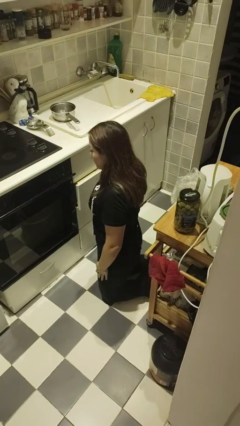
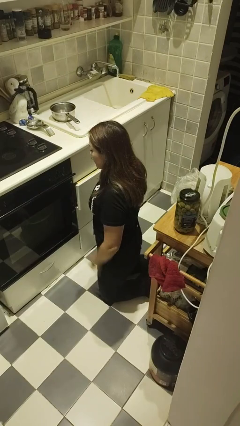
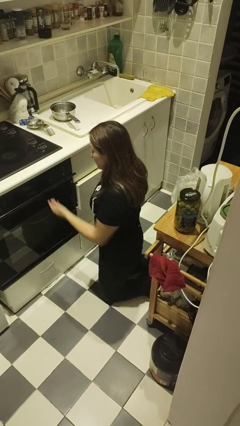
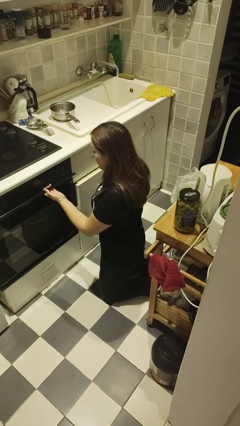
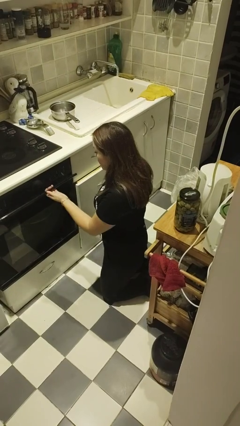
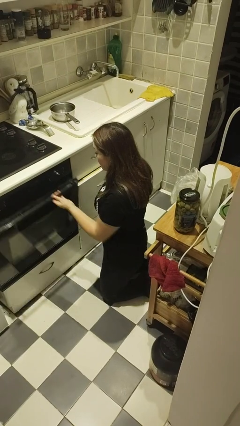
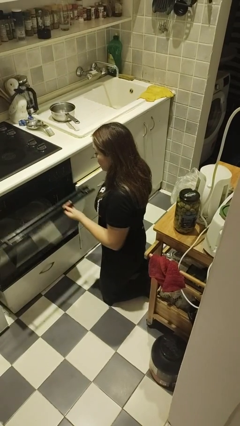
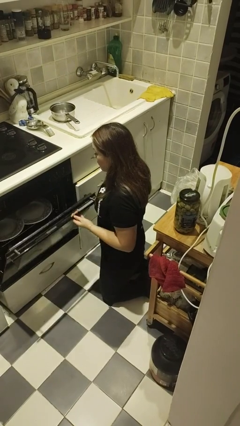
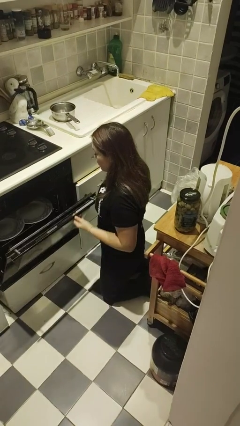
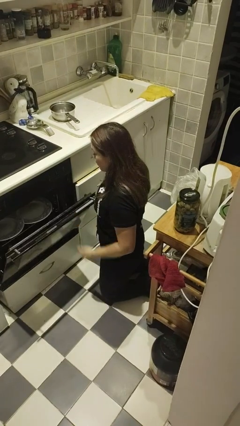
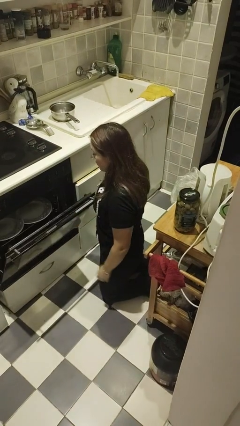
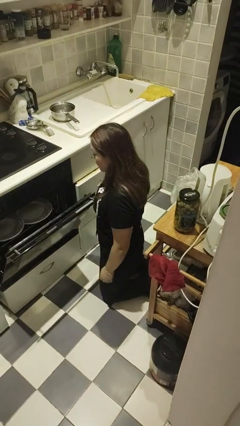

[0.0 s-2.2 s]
person opens oven door

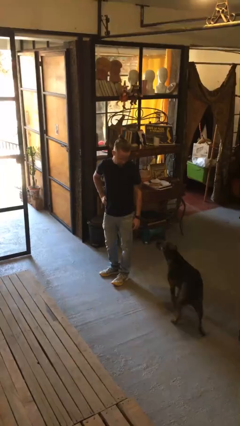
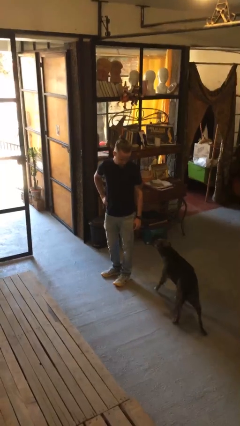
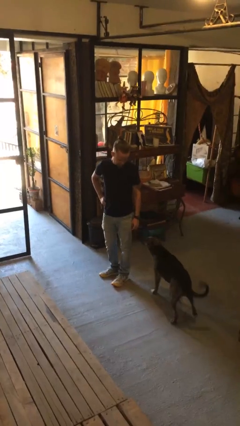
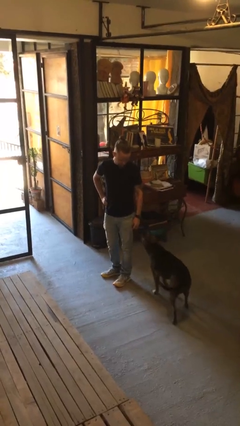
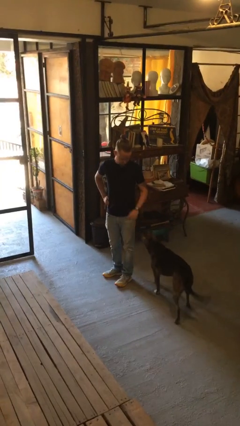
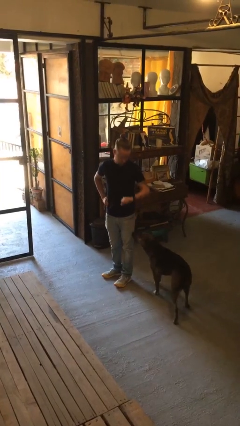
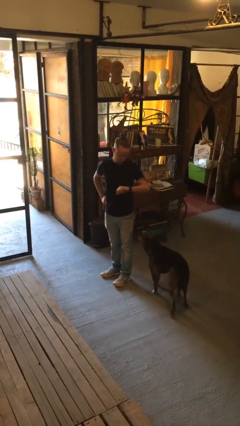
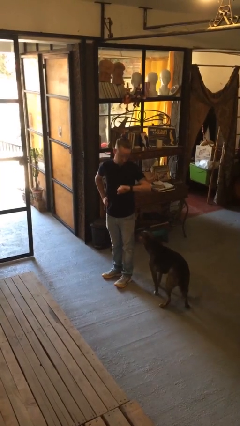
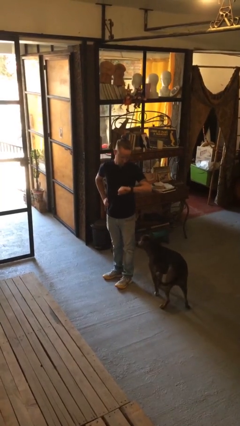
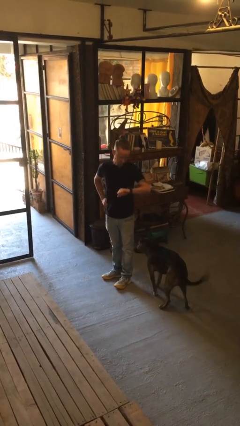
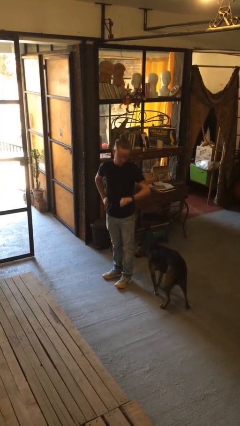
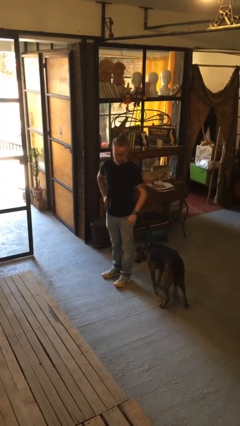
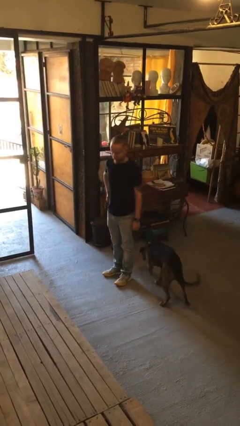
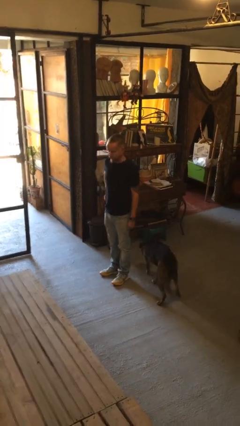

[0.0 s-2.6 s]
person looks at wristwatch

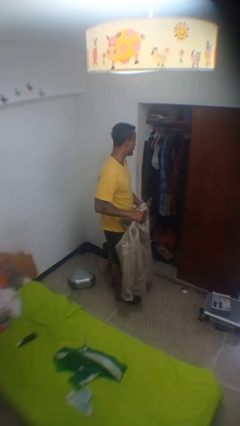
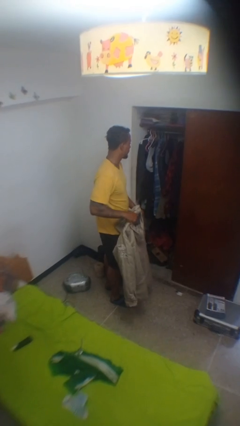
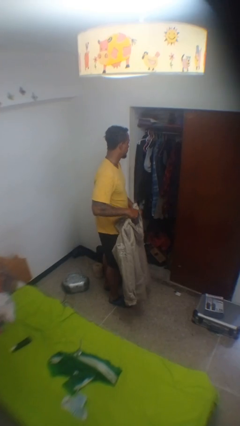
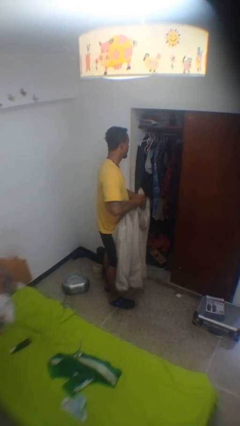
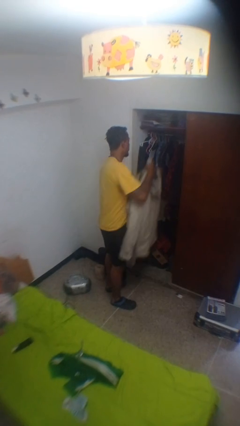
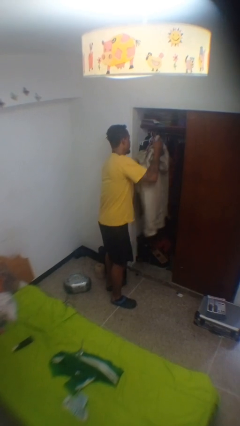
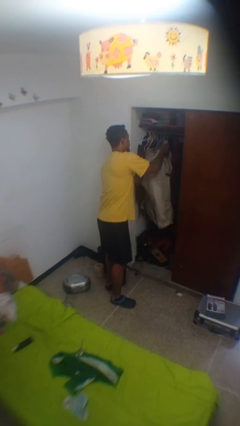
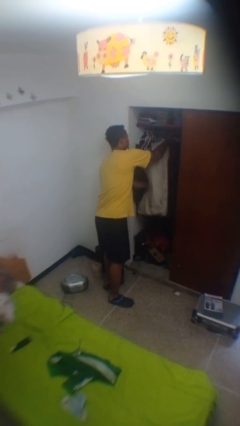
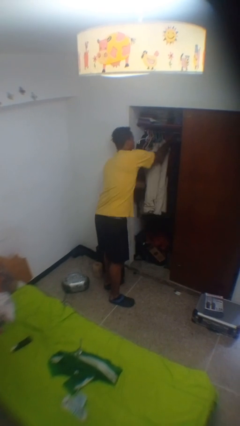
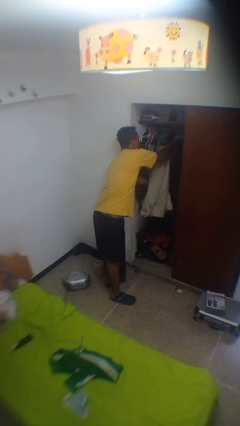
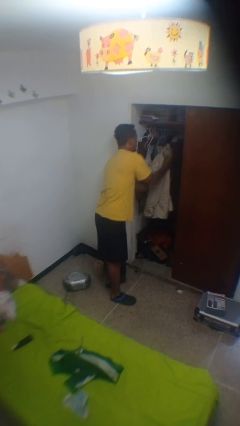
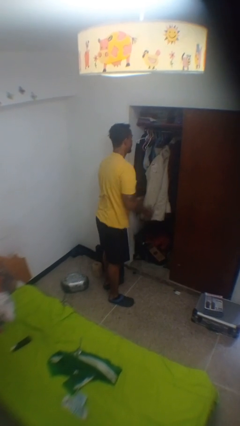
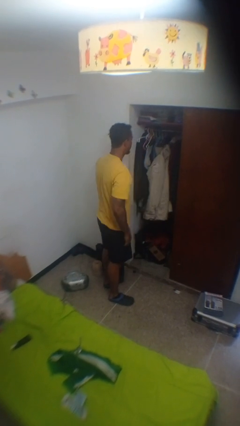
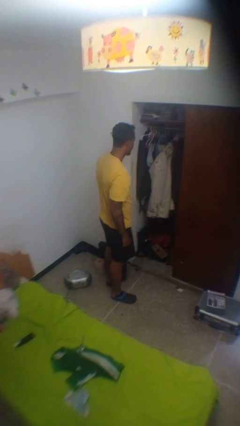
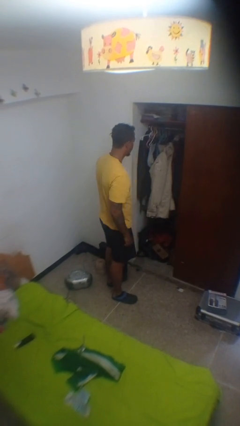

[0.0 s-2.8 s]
person puts clothes into closet

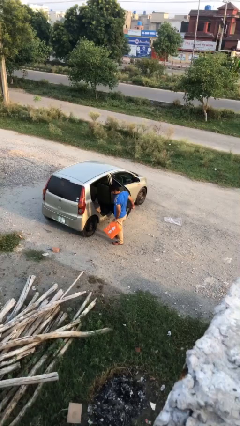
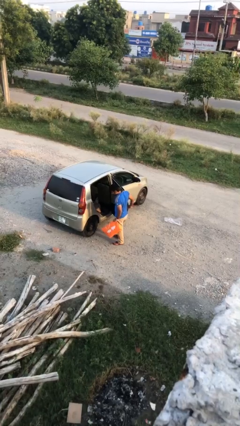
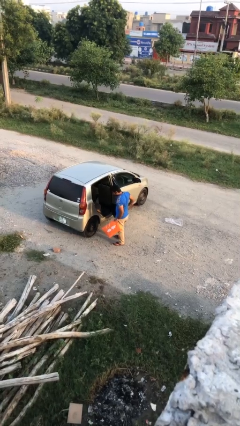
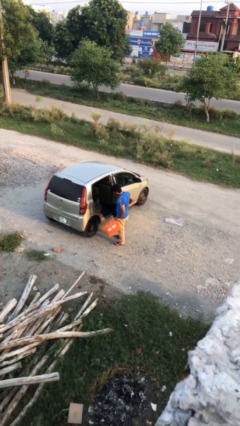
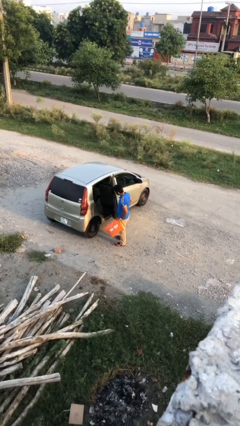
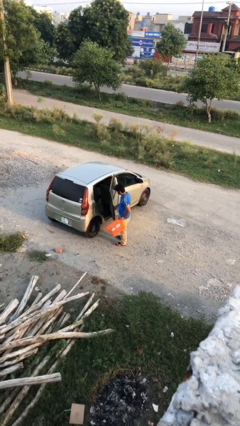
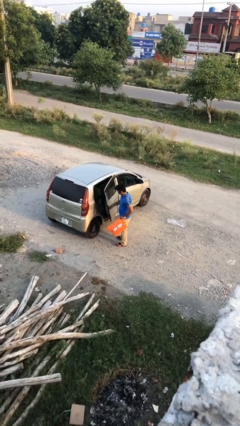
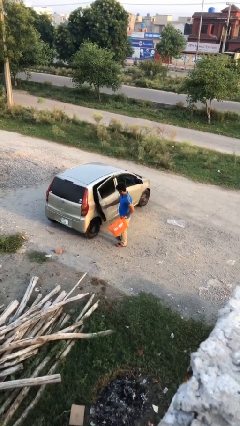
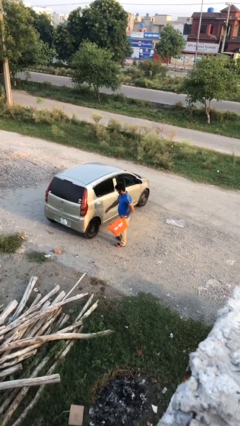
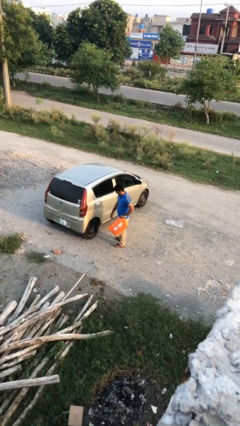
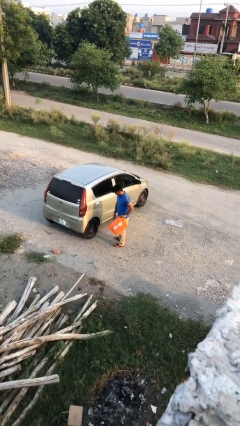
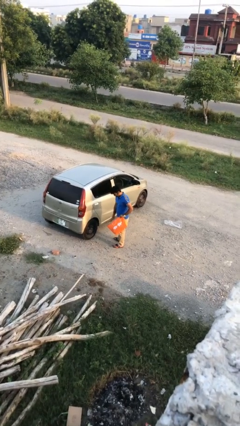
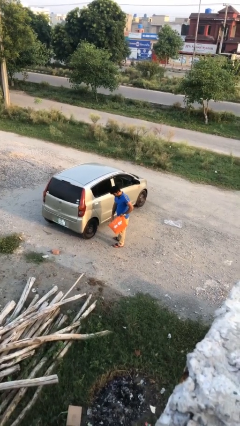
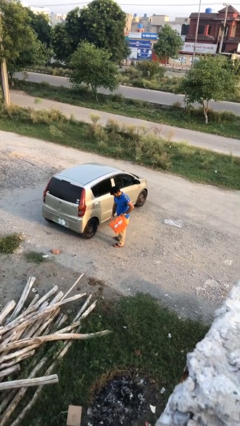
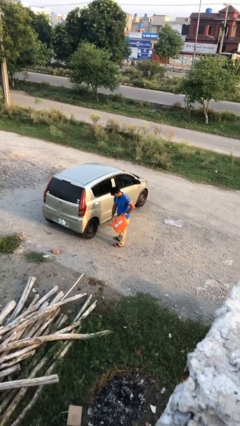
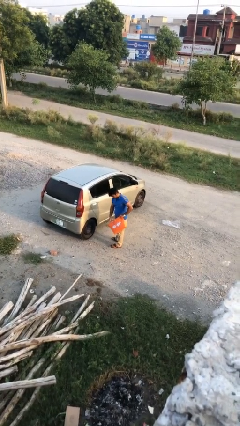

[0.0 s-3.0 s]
person closes car door

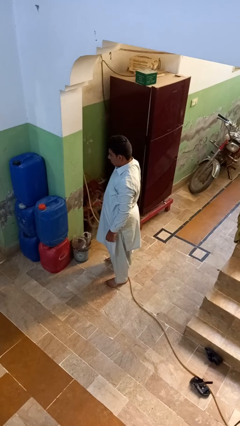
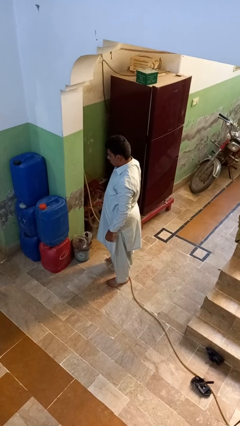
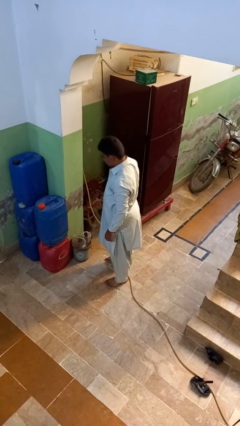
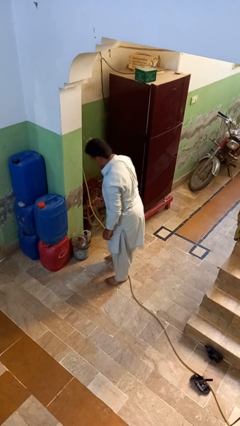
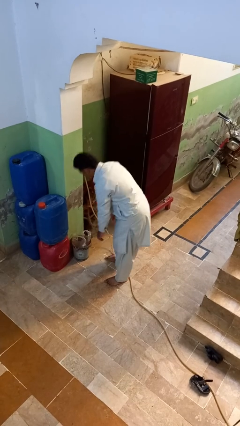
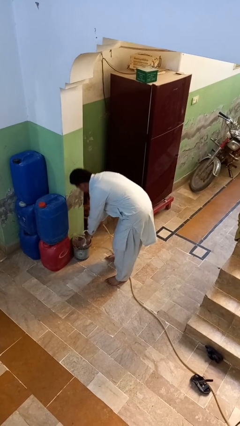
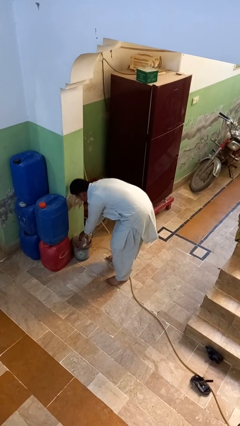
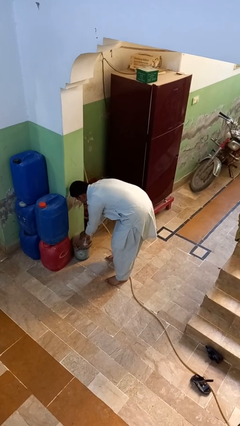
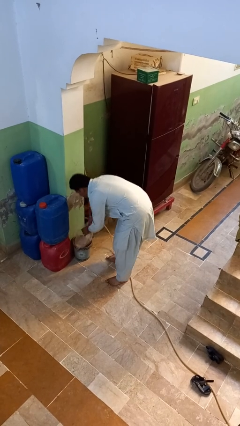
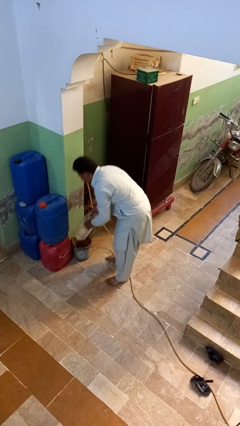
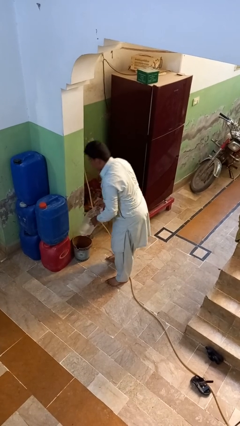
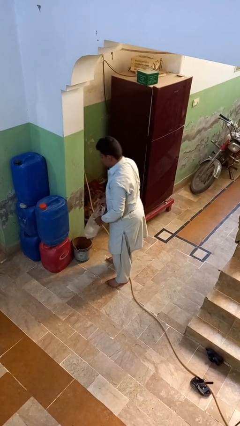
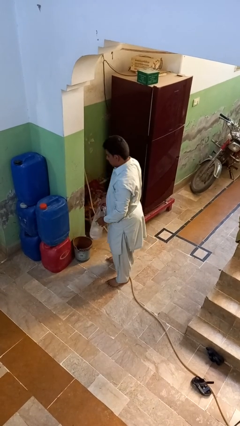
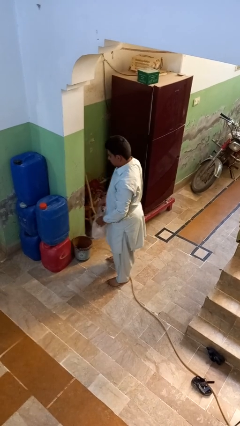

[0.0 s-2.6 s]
person removes trashbag from trashcan

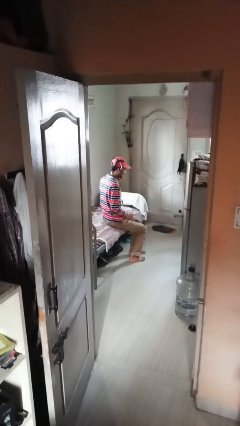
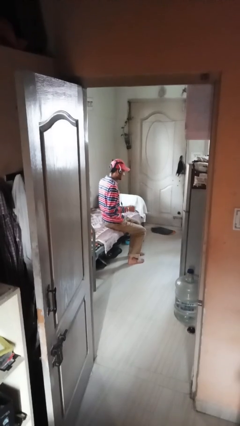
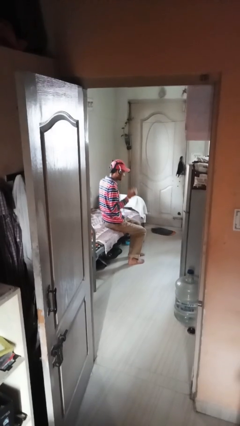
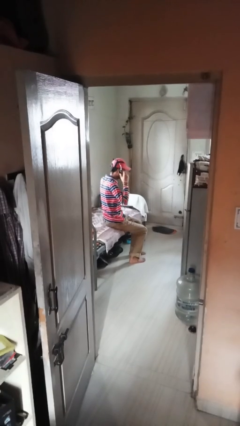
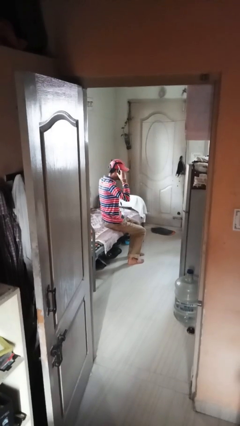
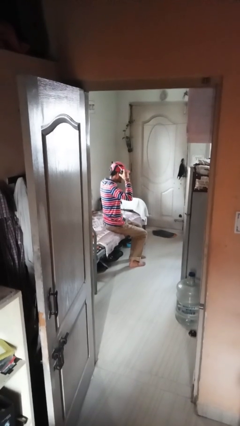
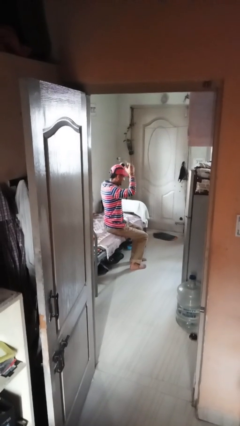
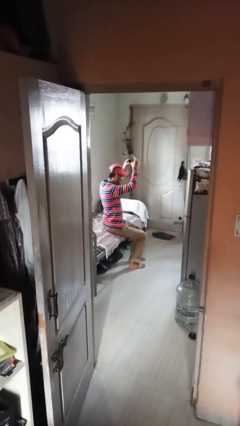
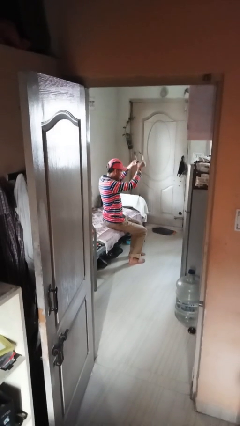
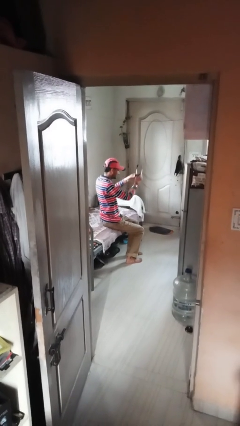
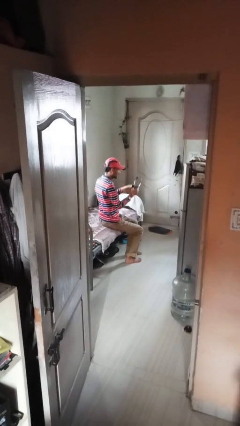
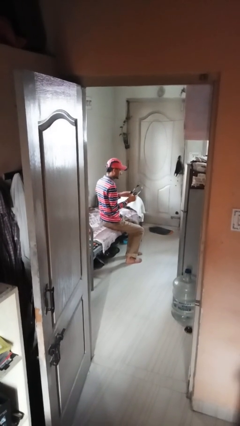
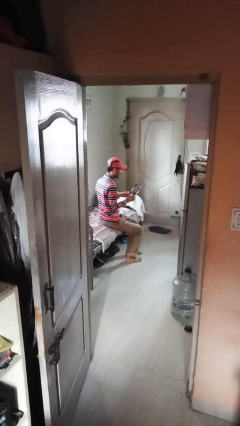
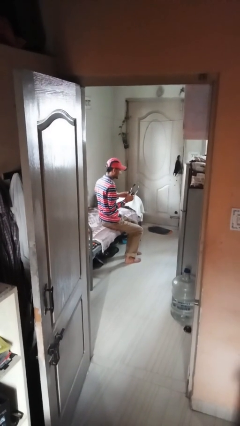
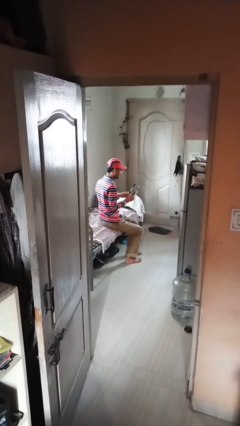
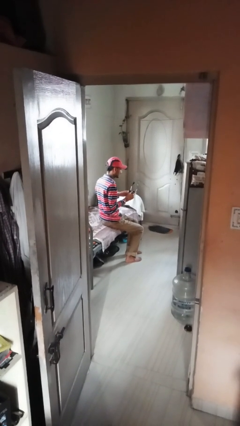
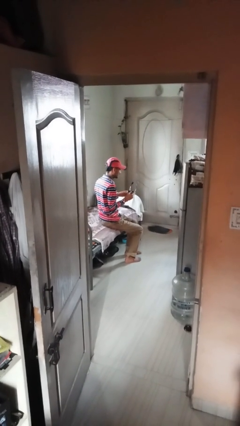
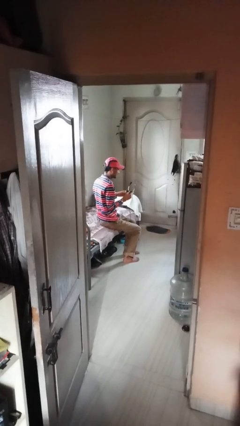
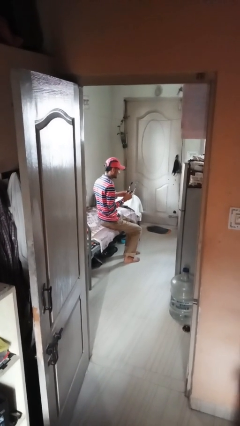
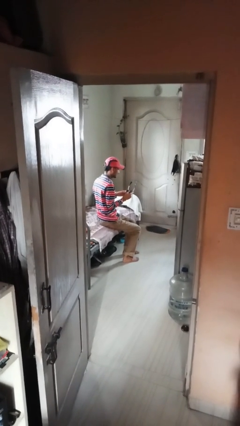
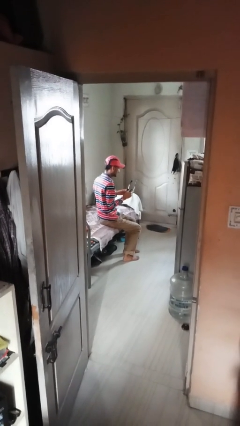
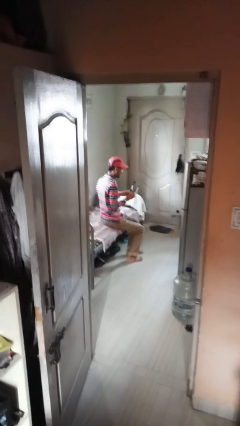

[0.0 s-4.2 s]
person takes off headphones
